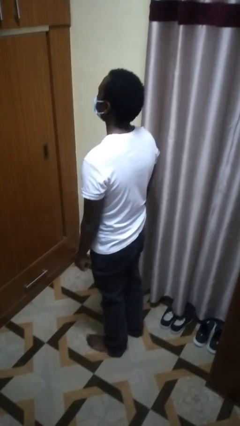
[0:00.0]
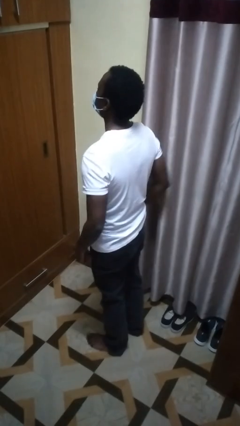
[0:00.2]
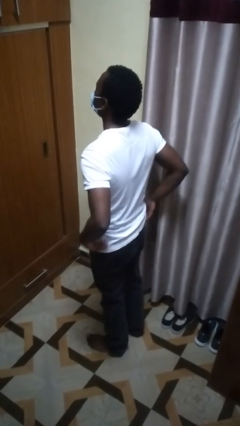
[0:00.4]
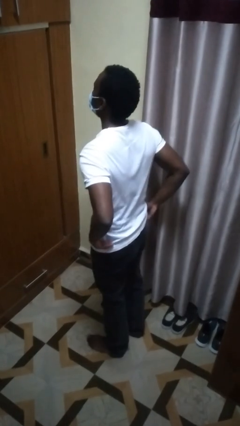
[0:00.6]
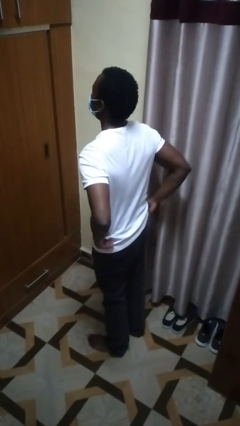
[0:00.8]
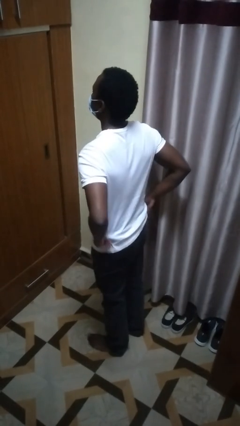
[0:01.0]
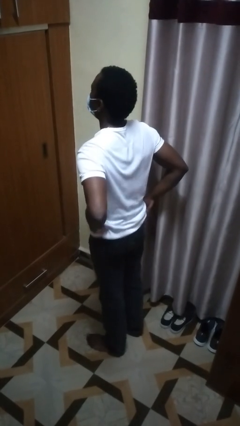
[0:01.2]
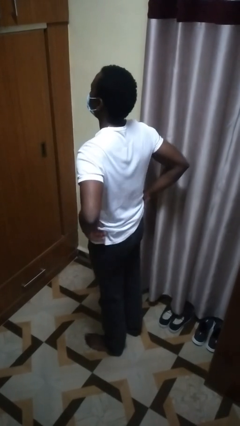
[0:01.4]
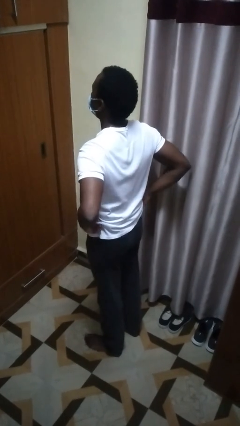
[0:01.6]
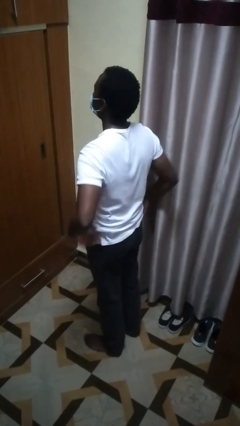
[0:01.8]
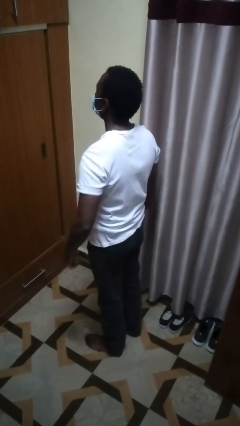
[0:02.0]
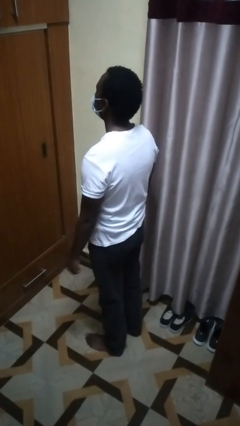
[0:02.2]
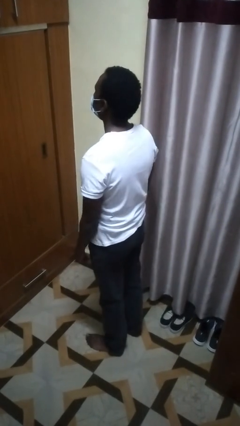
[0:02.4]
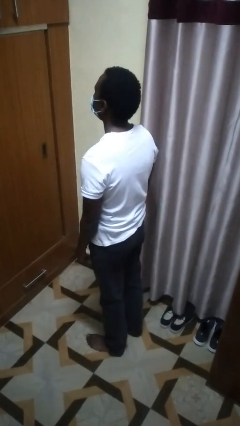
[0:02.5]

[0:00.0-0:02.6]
person hikes up pants

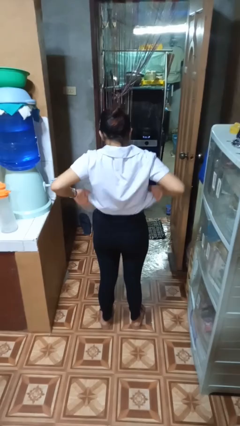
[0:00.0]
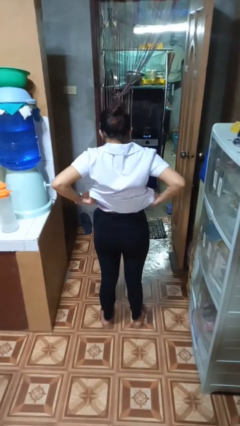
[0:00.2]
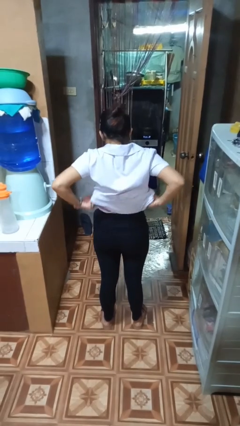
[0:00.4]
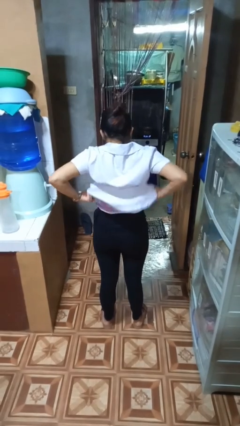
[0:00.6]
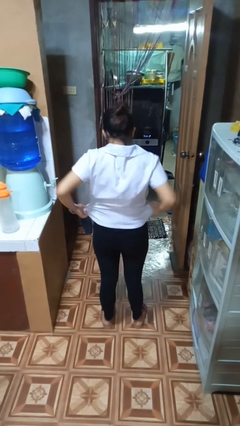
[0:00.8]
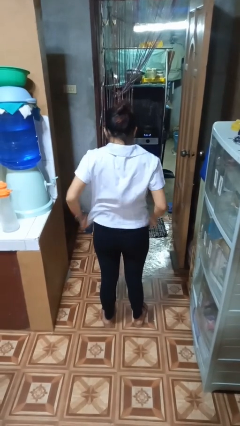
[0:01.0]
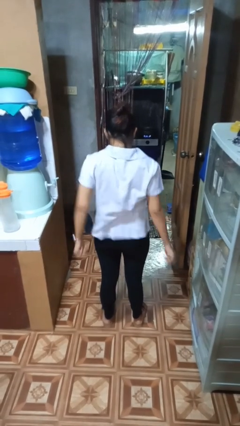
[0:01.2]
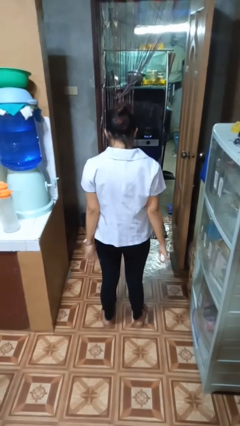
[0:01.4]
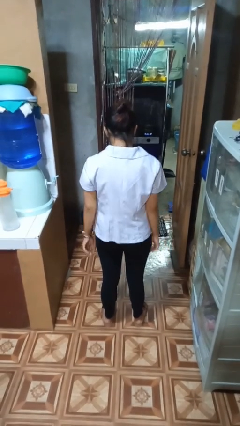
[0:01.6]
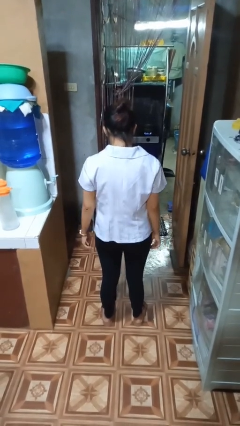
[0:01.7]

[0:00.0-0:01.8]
person untucks shirt

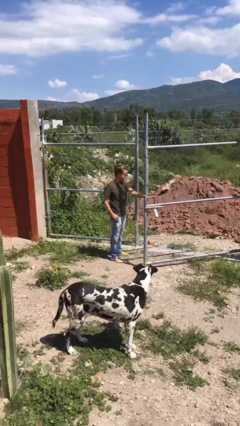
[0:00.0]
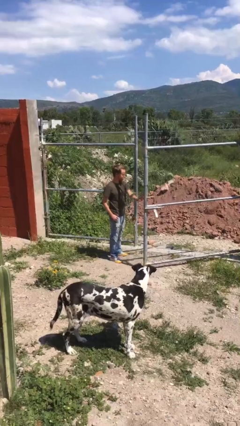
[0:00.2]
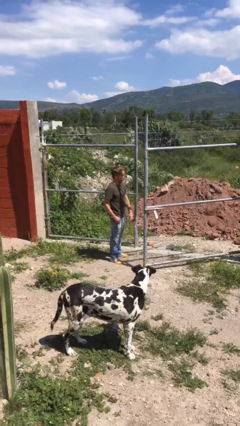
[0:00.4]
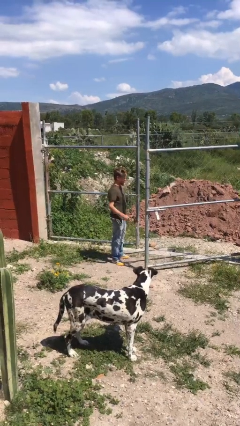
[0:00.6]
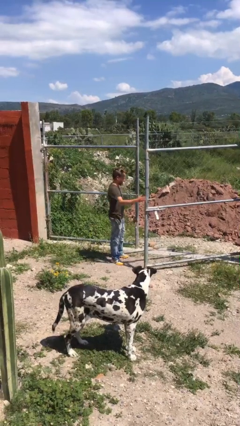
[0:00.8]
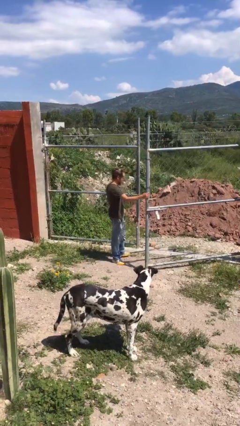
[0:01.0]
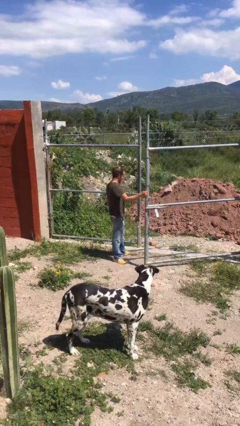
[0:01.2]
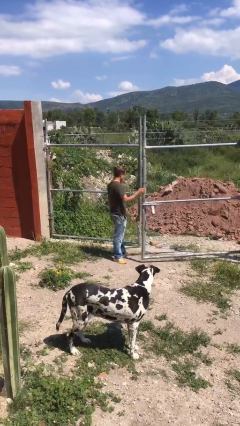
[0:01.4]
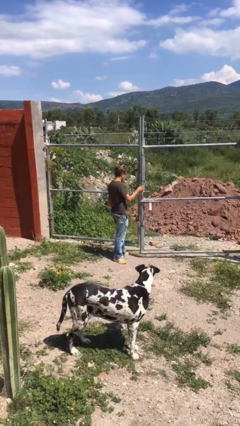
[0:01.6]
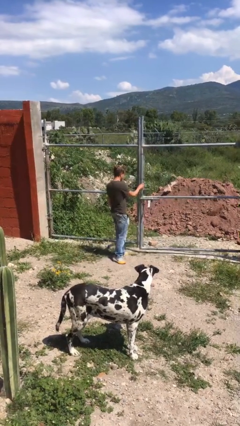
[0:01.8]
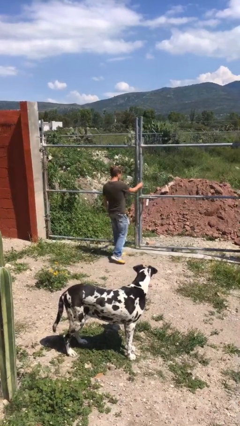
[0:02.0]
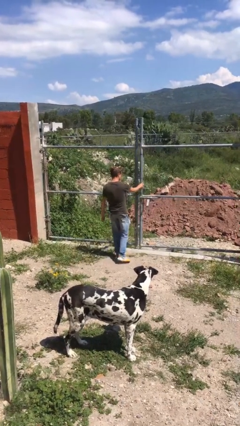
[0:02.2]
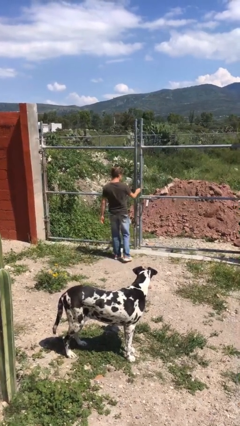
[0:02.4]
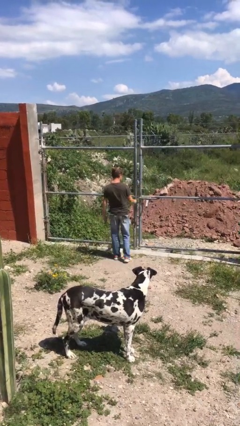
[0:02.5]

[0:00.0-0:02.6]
person closes gate

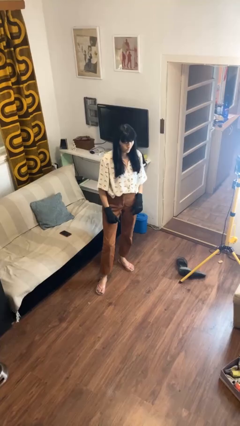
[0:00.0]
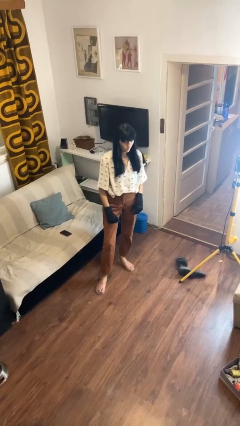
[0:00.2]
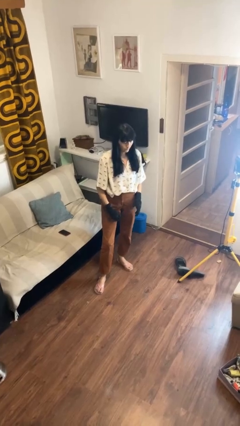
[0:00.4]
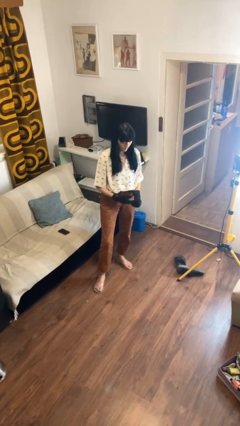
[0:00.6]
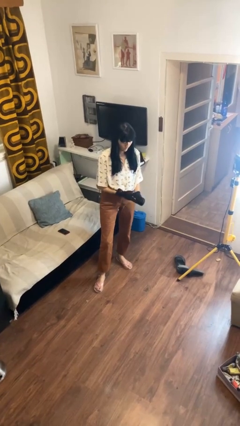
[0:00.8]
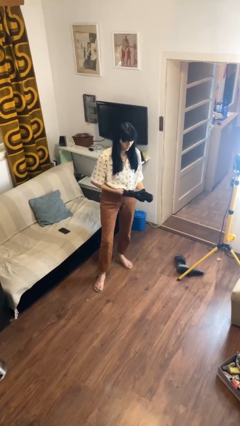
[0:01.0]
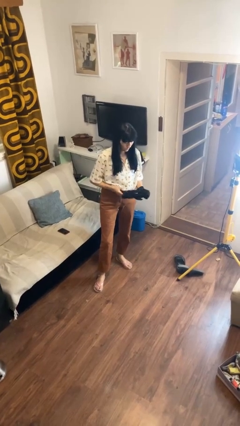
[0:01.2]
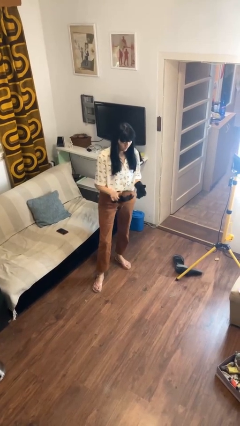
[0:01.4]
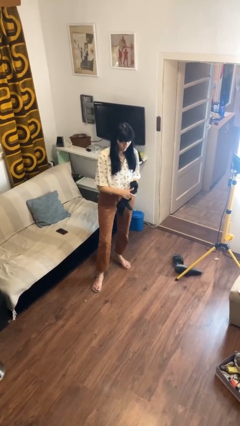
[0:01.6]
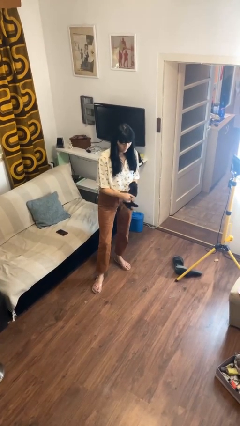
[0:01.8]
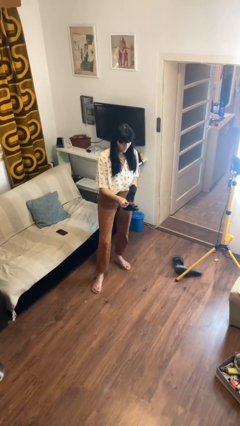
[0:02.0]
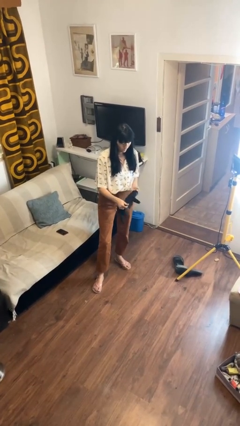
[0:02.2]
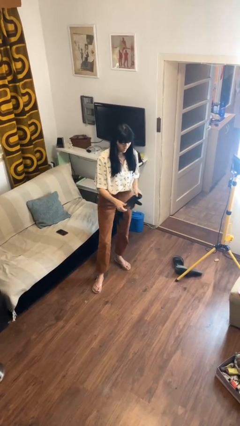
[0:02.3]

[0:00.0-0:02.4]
person takes off gloves

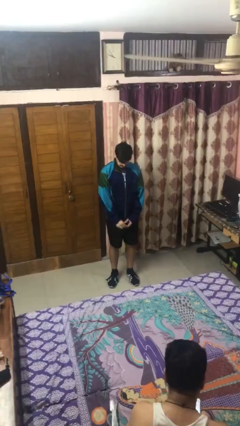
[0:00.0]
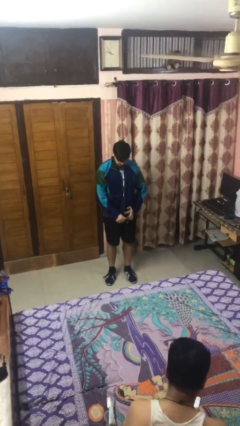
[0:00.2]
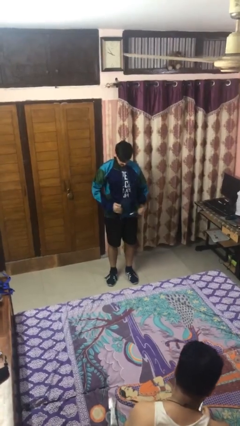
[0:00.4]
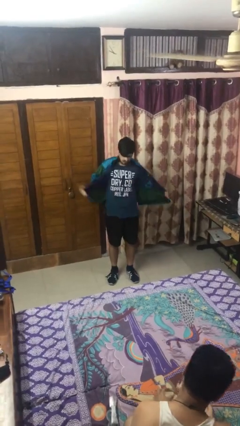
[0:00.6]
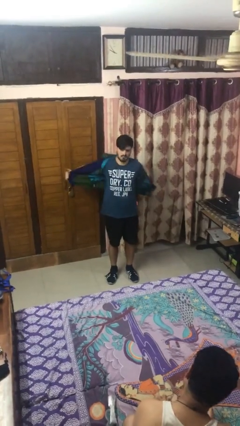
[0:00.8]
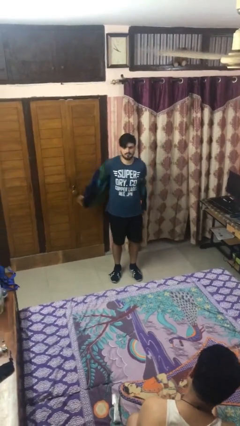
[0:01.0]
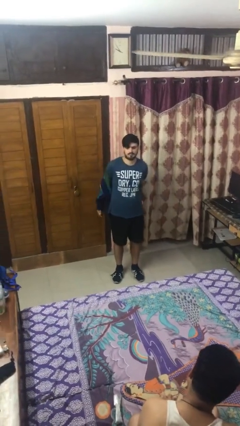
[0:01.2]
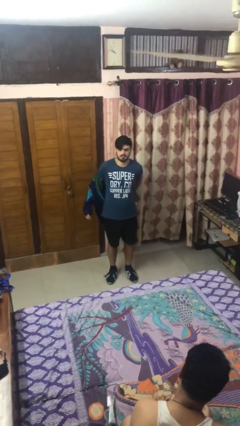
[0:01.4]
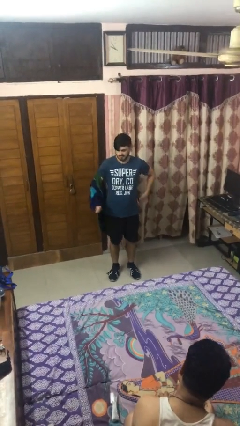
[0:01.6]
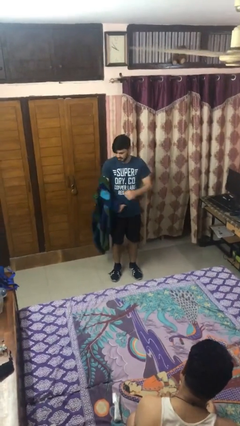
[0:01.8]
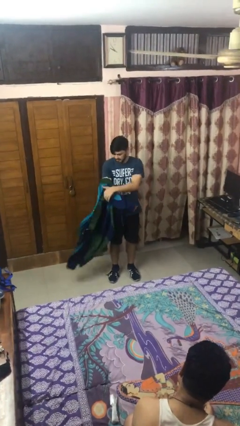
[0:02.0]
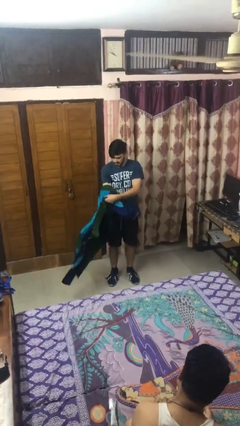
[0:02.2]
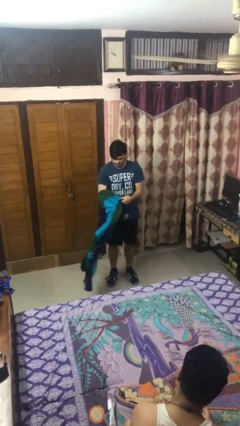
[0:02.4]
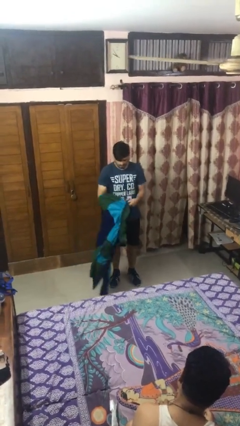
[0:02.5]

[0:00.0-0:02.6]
person takes off jacket

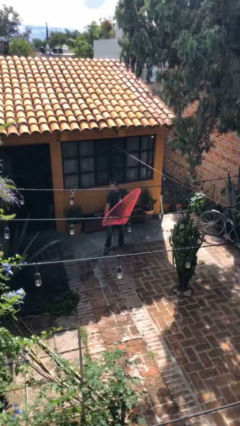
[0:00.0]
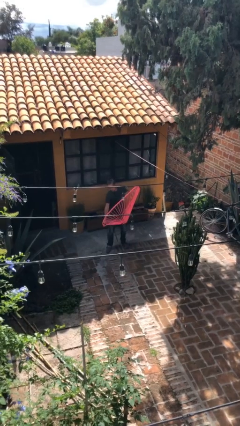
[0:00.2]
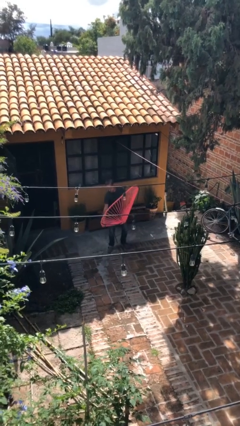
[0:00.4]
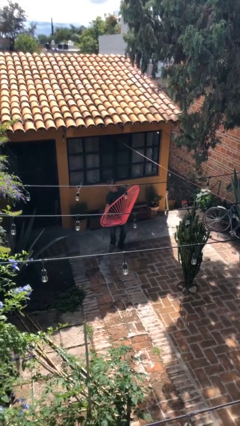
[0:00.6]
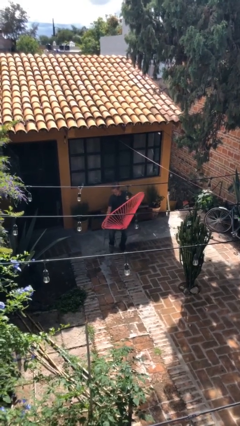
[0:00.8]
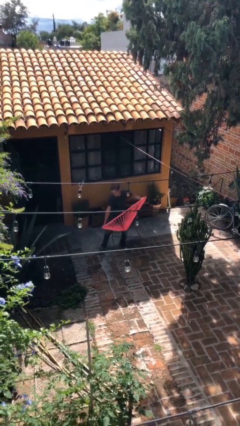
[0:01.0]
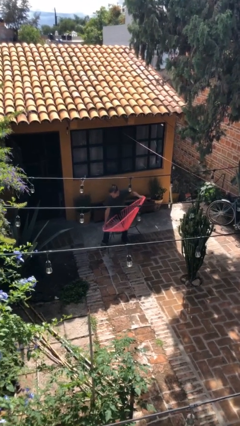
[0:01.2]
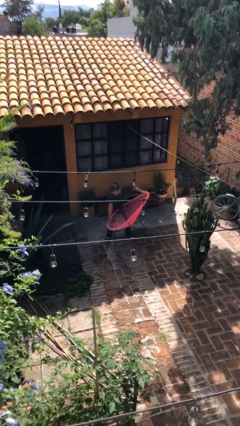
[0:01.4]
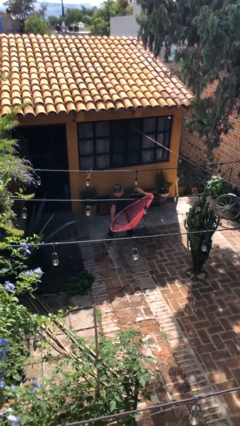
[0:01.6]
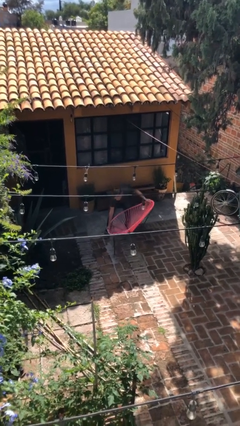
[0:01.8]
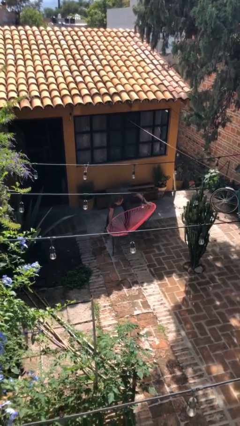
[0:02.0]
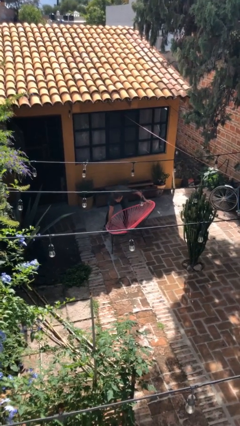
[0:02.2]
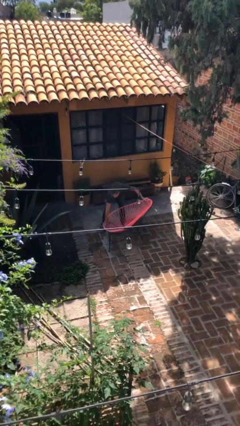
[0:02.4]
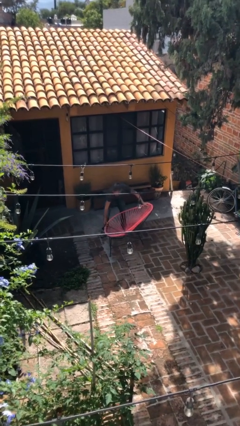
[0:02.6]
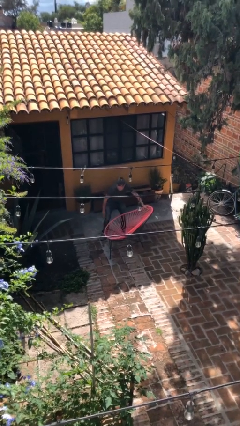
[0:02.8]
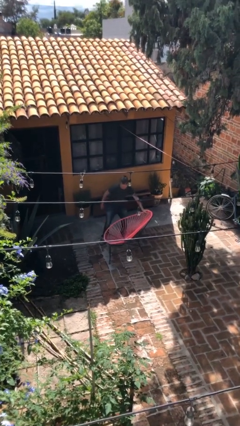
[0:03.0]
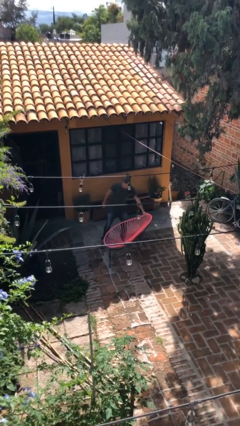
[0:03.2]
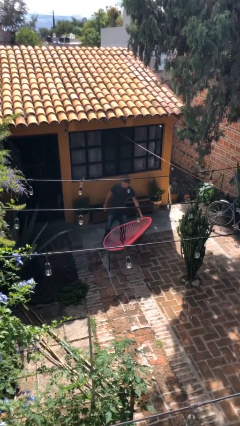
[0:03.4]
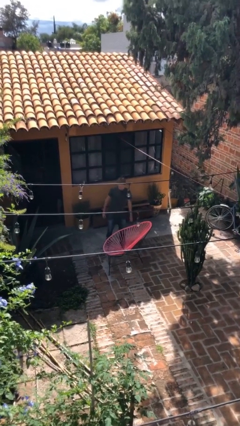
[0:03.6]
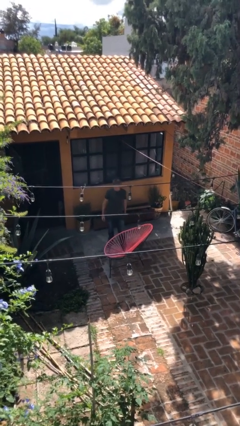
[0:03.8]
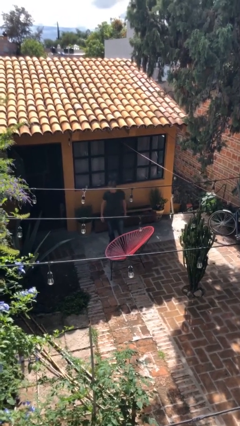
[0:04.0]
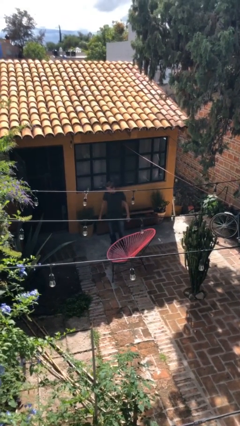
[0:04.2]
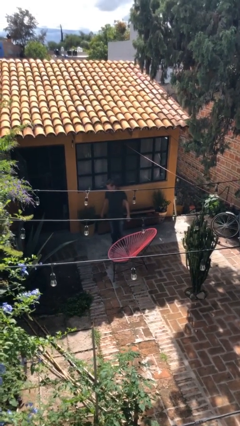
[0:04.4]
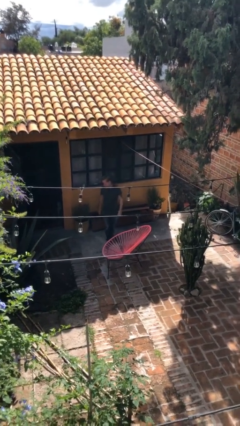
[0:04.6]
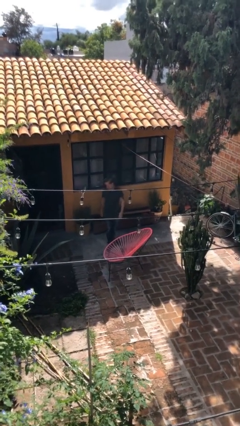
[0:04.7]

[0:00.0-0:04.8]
person puts down object on floor
